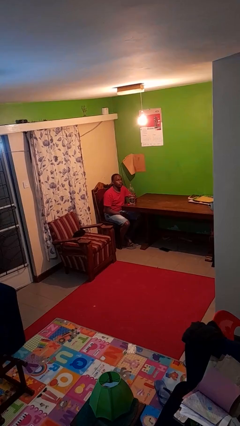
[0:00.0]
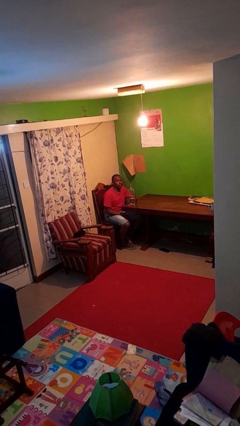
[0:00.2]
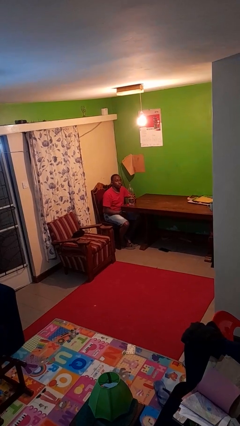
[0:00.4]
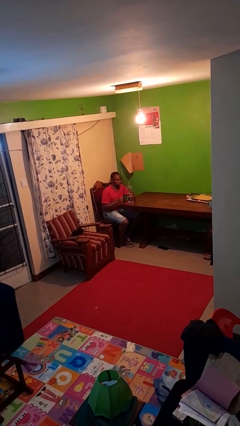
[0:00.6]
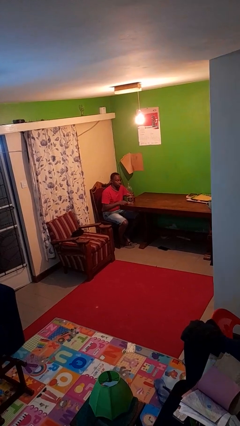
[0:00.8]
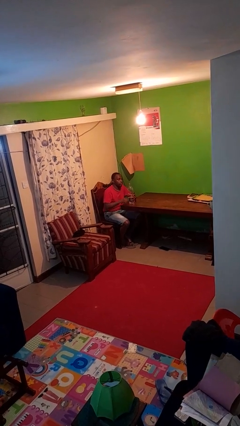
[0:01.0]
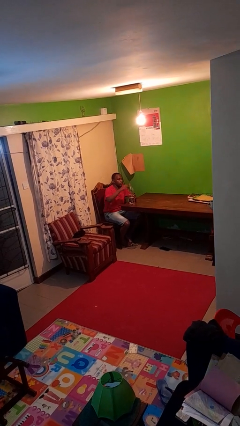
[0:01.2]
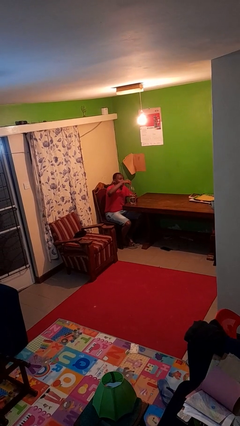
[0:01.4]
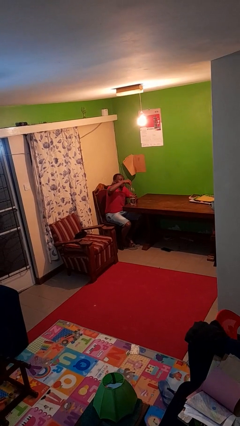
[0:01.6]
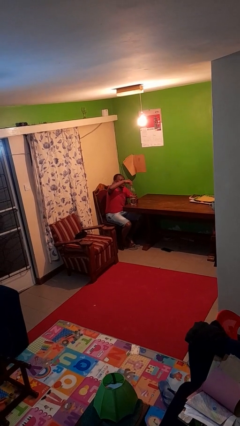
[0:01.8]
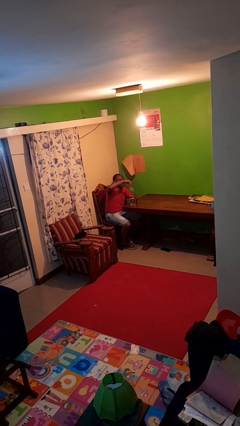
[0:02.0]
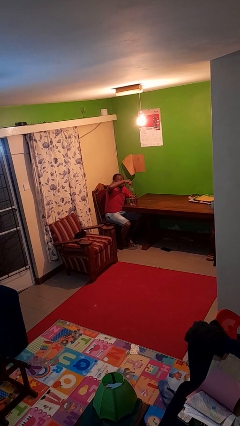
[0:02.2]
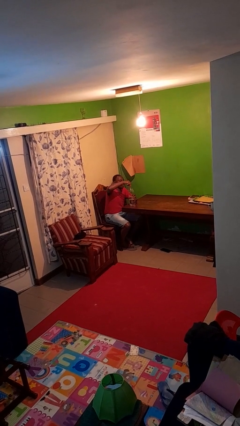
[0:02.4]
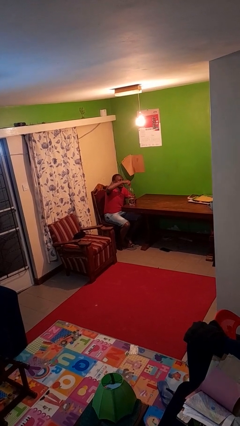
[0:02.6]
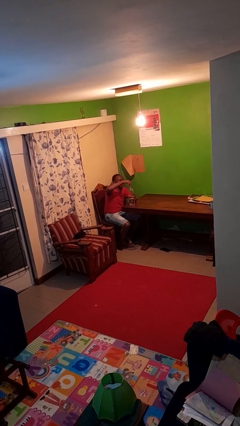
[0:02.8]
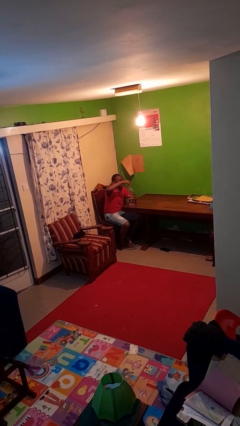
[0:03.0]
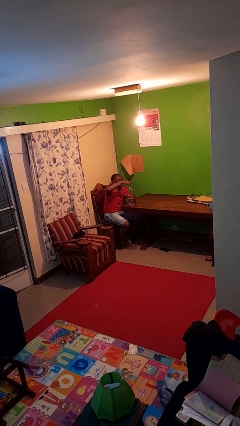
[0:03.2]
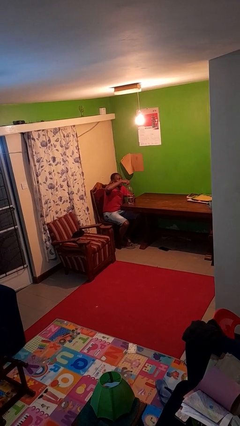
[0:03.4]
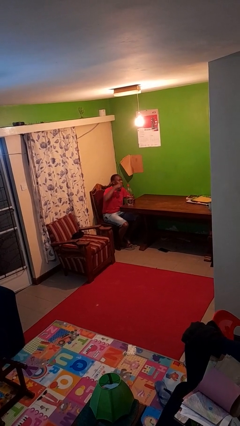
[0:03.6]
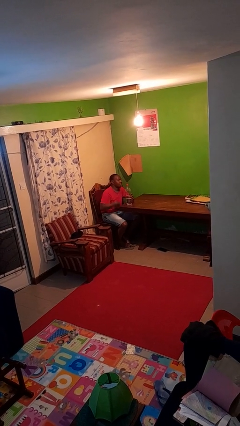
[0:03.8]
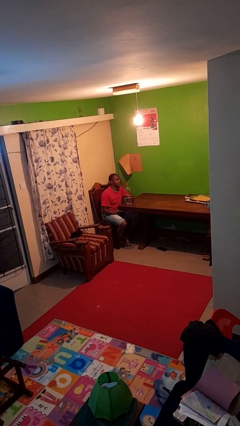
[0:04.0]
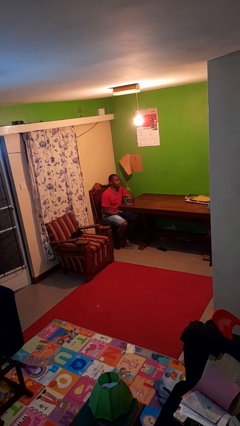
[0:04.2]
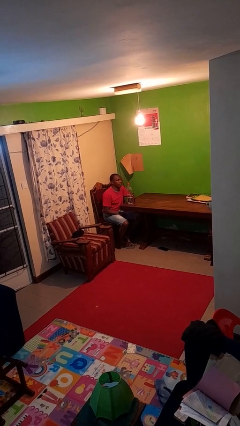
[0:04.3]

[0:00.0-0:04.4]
person screws lid to bottle

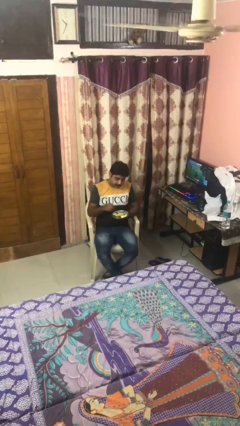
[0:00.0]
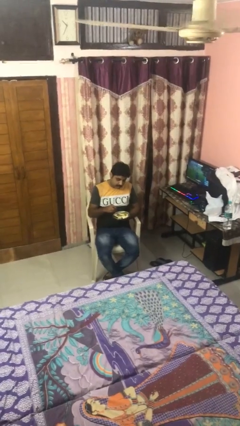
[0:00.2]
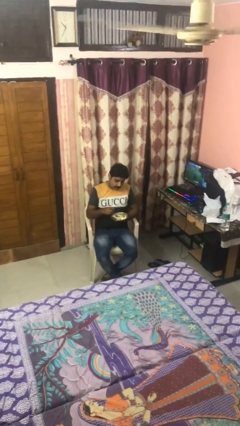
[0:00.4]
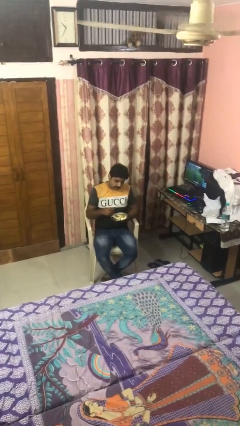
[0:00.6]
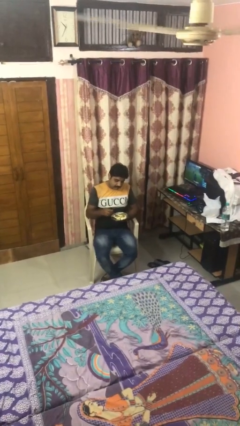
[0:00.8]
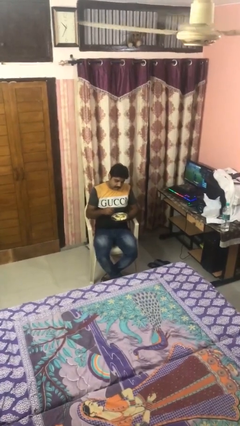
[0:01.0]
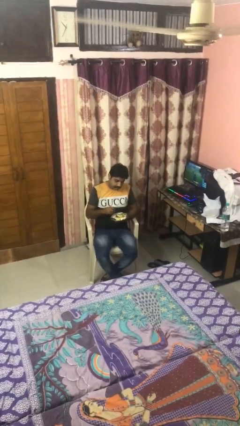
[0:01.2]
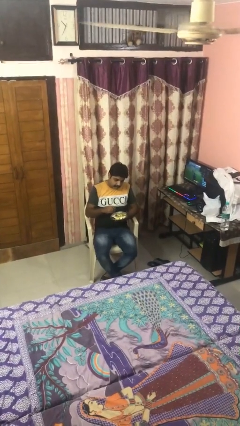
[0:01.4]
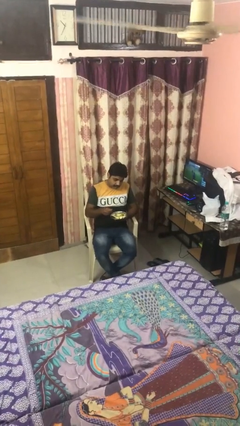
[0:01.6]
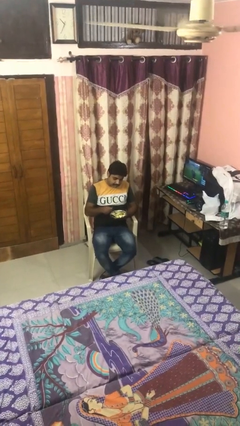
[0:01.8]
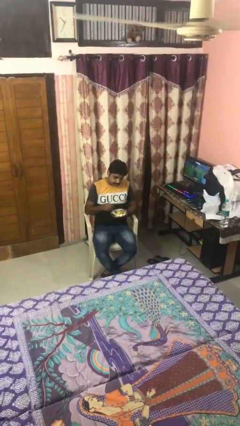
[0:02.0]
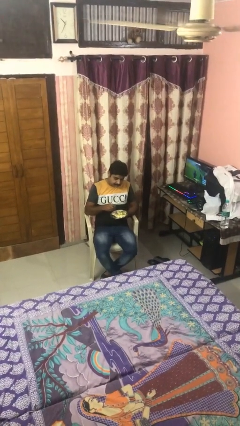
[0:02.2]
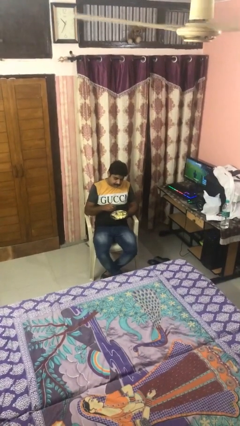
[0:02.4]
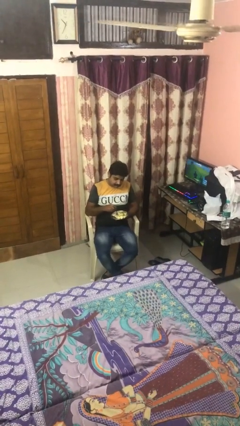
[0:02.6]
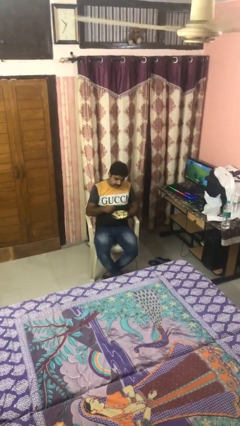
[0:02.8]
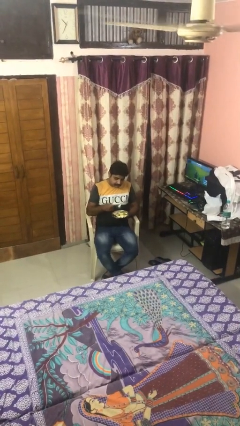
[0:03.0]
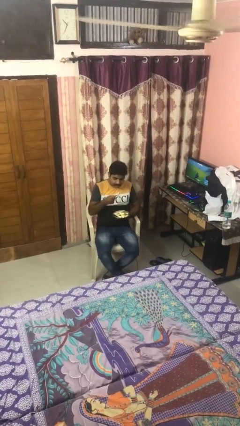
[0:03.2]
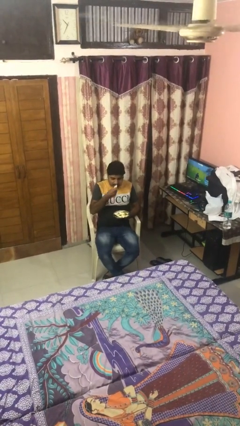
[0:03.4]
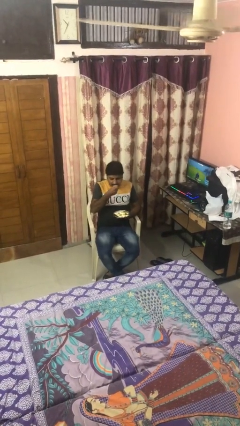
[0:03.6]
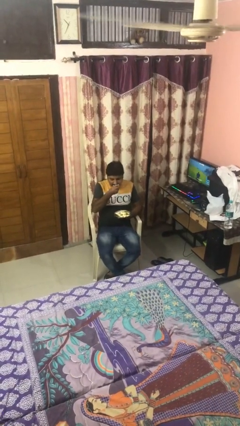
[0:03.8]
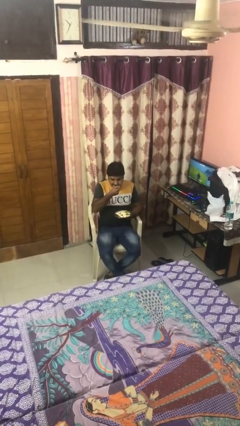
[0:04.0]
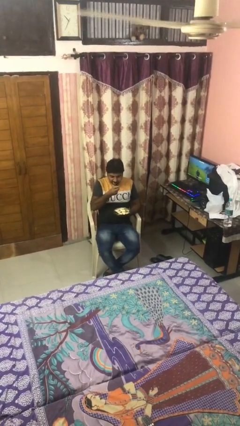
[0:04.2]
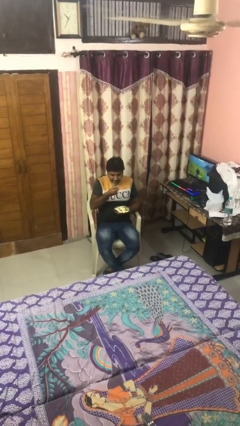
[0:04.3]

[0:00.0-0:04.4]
person eats with utensil

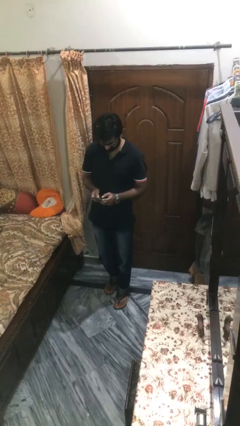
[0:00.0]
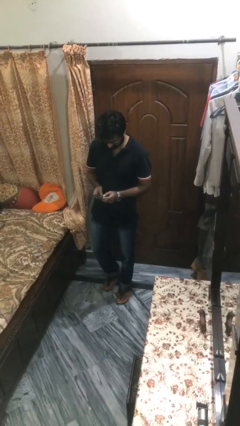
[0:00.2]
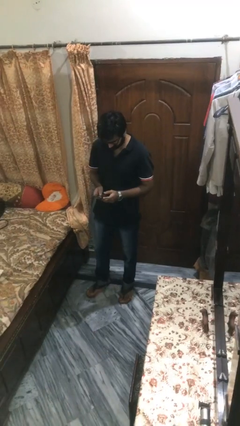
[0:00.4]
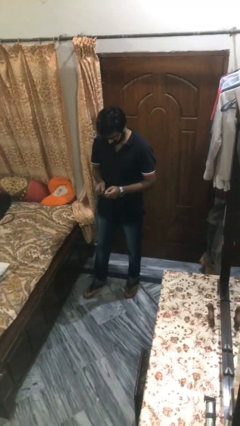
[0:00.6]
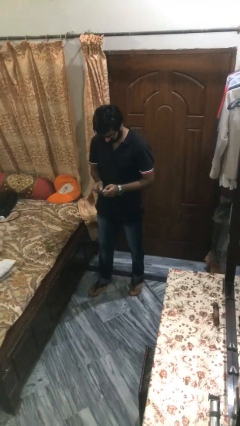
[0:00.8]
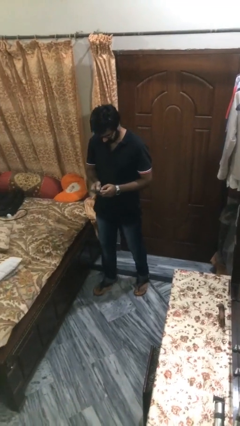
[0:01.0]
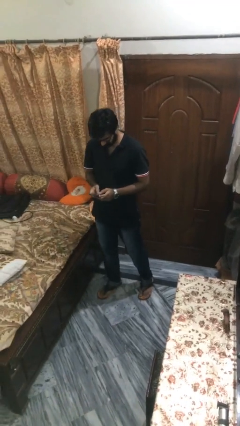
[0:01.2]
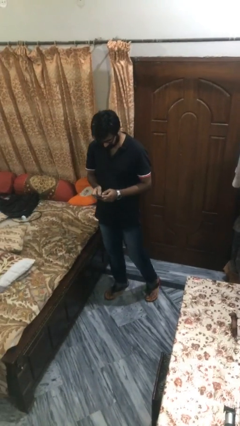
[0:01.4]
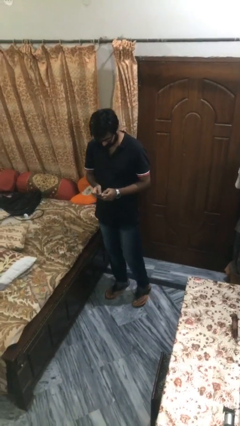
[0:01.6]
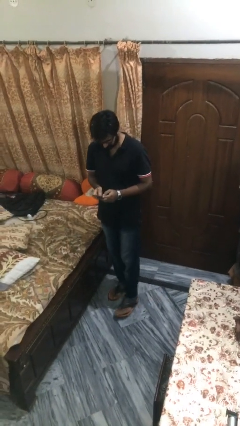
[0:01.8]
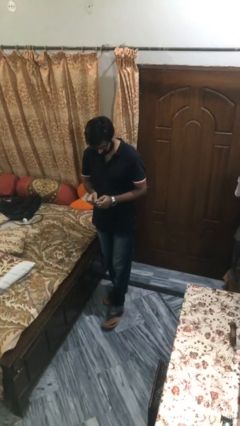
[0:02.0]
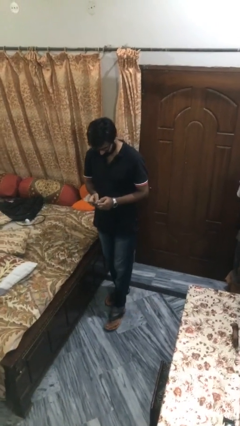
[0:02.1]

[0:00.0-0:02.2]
person texts on phone

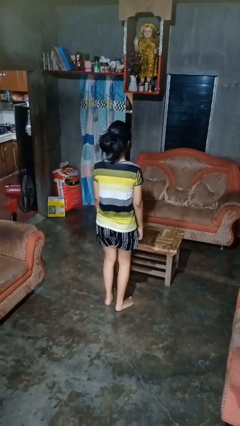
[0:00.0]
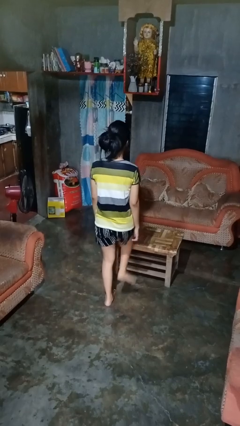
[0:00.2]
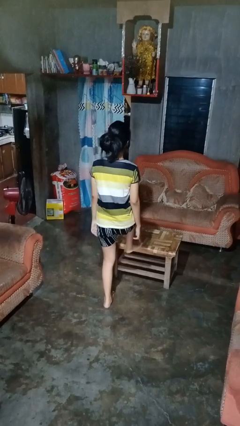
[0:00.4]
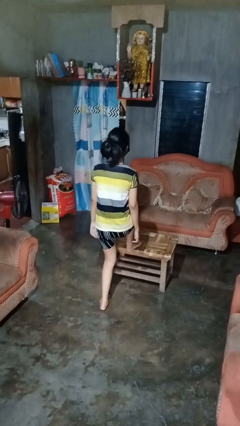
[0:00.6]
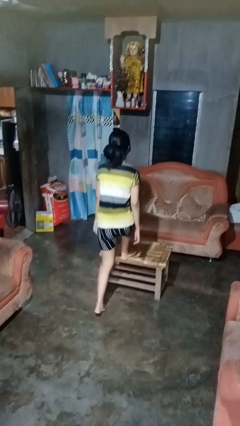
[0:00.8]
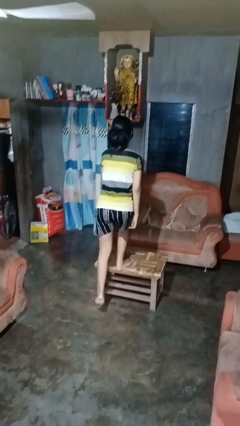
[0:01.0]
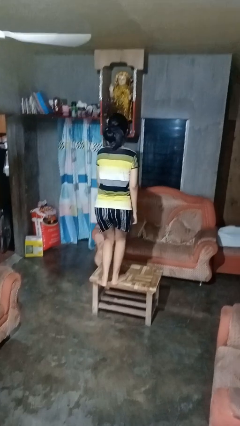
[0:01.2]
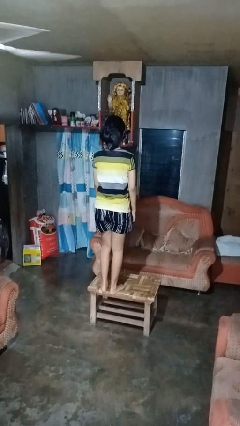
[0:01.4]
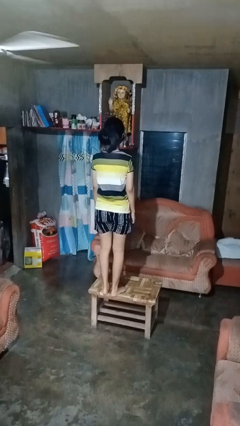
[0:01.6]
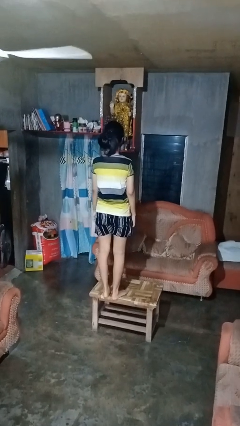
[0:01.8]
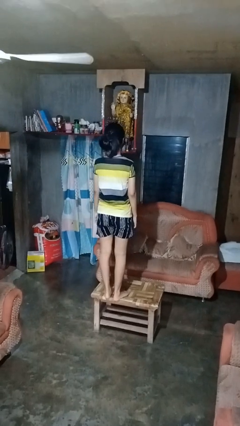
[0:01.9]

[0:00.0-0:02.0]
person climbs on table

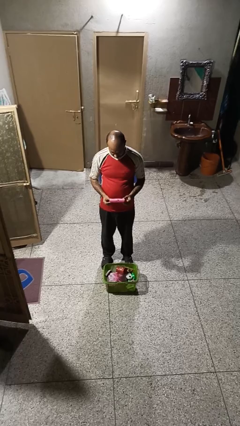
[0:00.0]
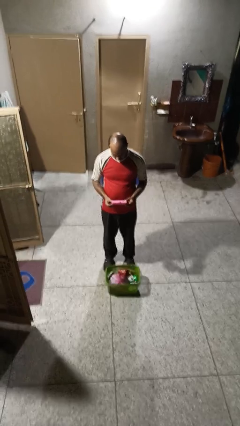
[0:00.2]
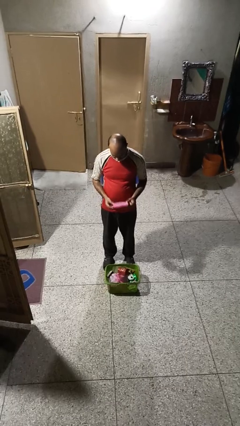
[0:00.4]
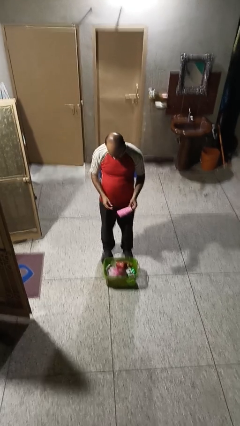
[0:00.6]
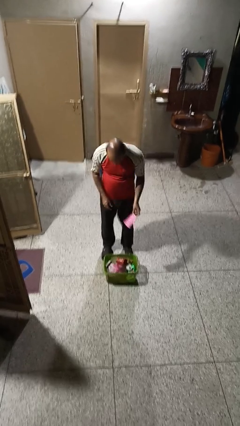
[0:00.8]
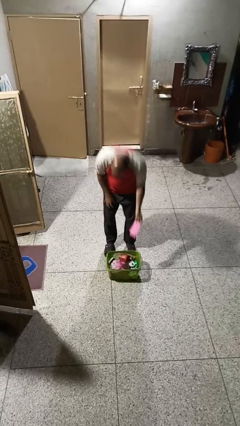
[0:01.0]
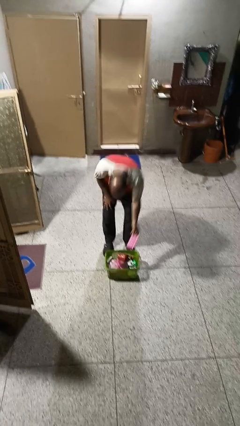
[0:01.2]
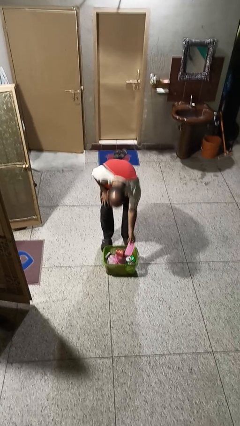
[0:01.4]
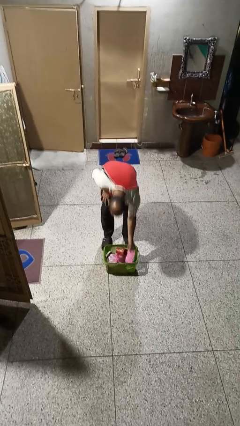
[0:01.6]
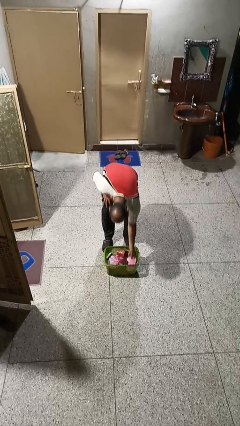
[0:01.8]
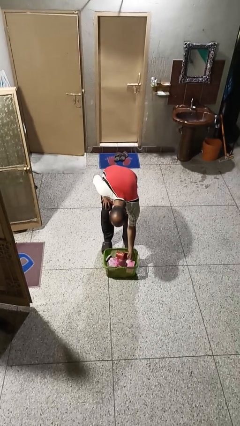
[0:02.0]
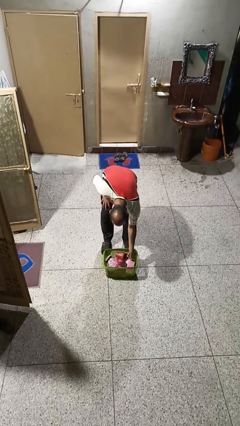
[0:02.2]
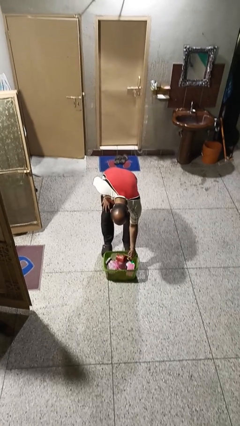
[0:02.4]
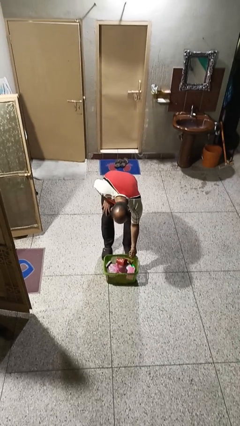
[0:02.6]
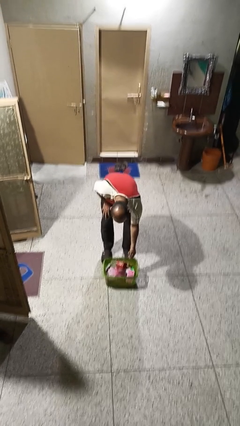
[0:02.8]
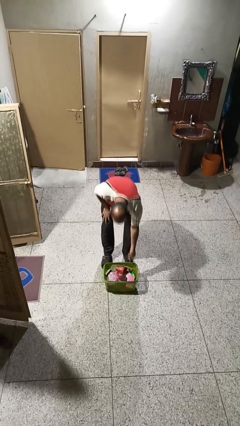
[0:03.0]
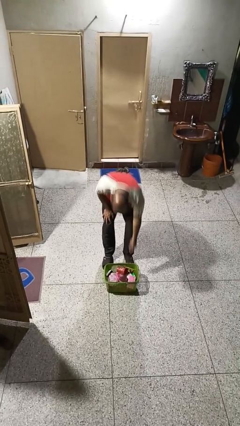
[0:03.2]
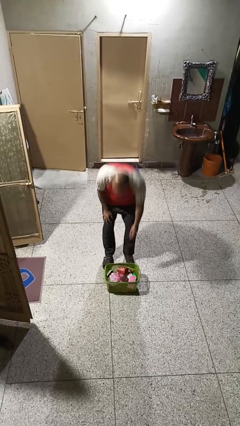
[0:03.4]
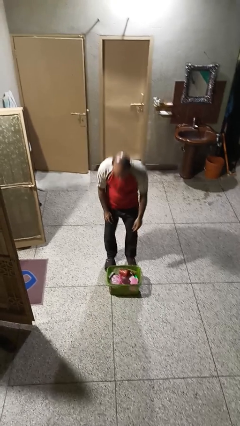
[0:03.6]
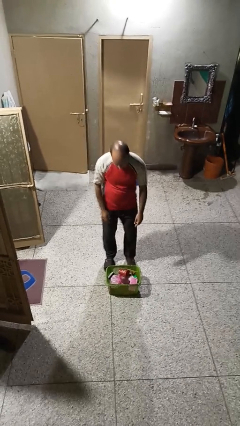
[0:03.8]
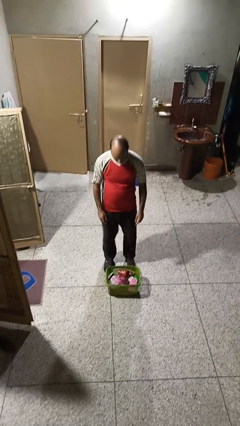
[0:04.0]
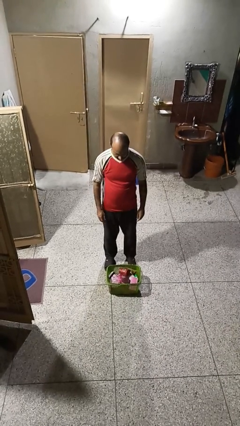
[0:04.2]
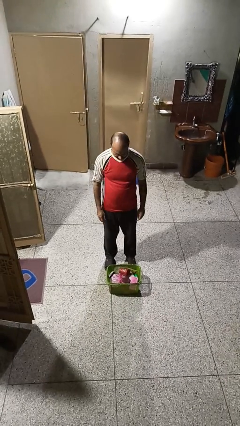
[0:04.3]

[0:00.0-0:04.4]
person puts object into basket

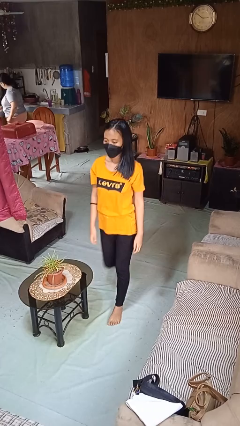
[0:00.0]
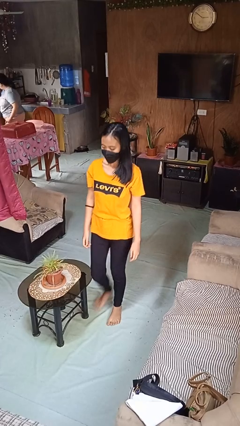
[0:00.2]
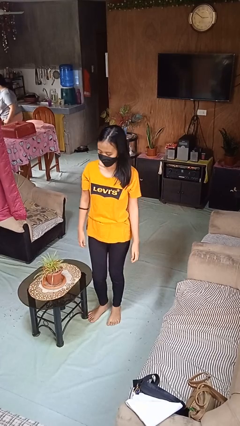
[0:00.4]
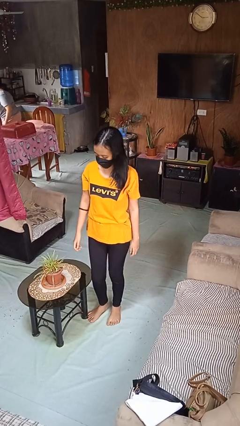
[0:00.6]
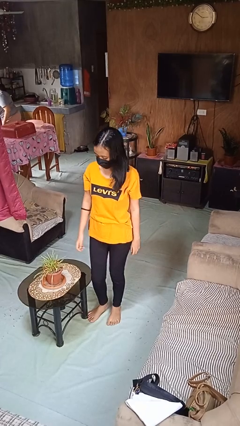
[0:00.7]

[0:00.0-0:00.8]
person bumps into table
